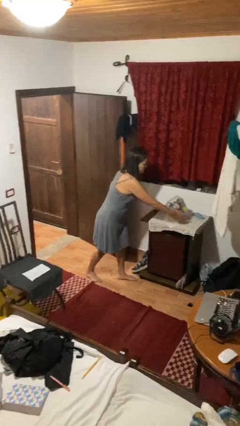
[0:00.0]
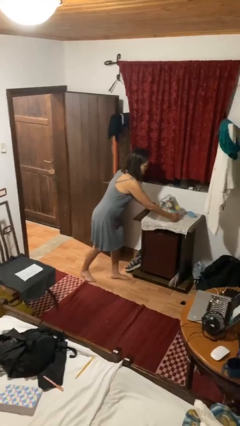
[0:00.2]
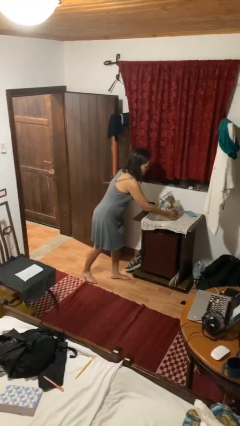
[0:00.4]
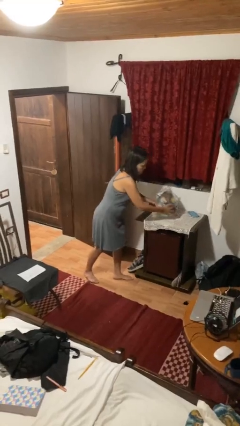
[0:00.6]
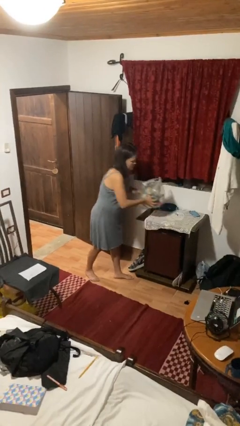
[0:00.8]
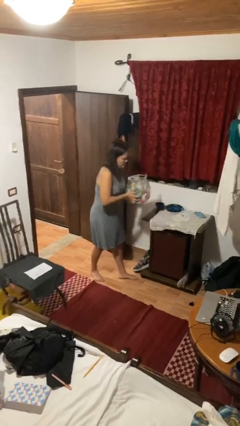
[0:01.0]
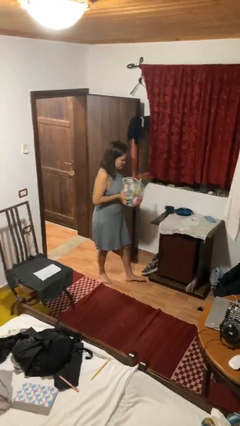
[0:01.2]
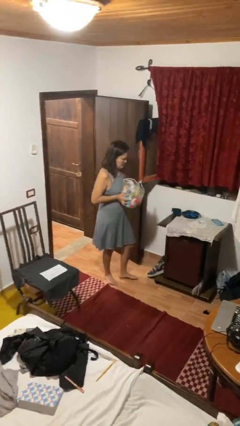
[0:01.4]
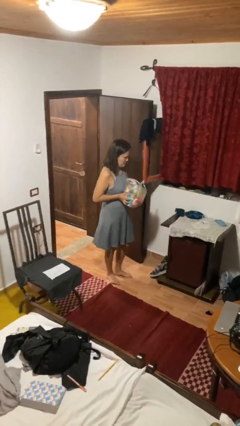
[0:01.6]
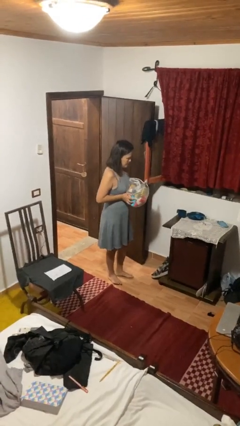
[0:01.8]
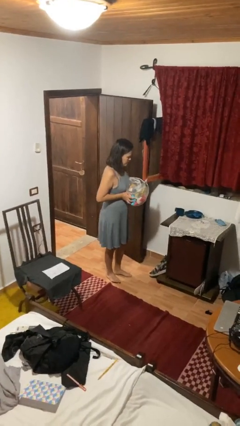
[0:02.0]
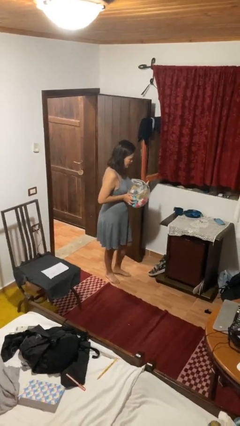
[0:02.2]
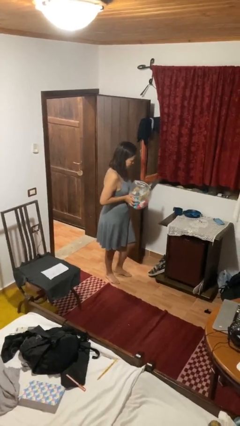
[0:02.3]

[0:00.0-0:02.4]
person picks up object from countertop

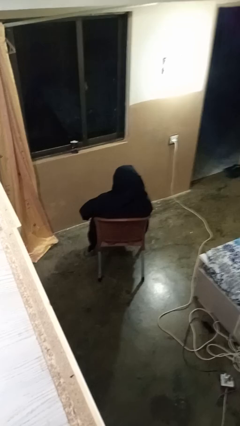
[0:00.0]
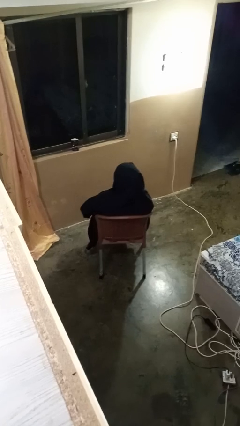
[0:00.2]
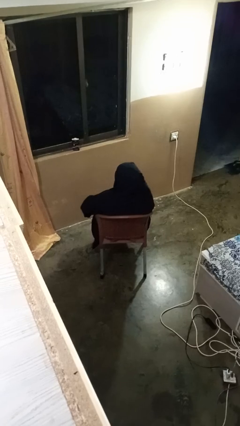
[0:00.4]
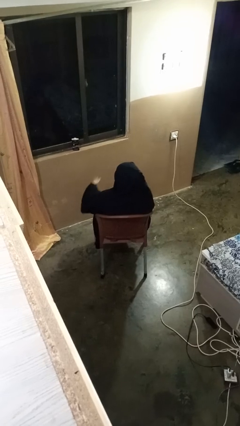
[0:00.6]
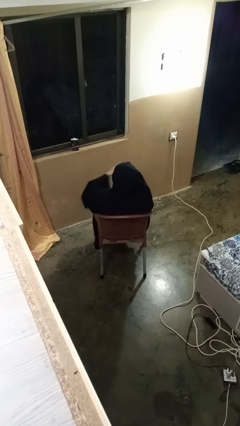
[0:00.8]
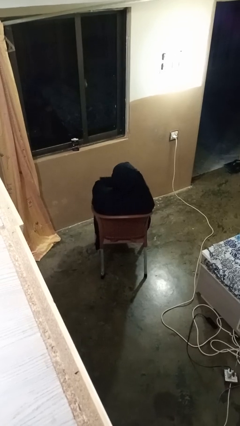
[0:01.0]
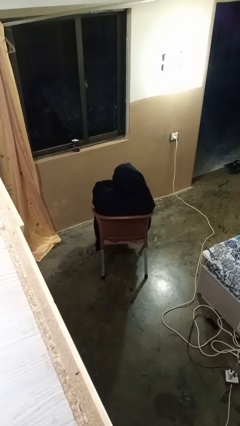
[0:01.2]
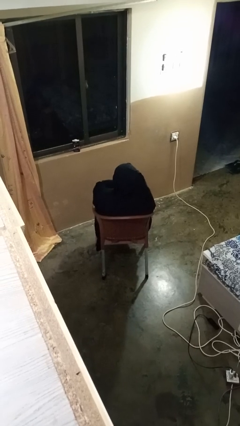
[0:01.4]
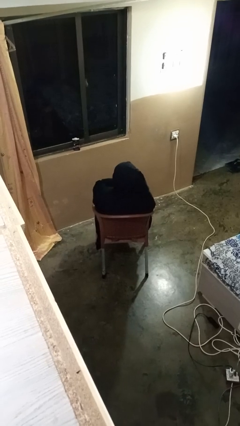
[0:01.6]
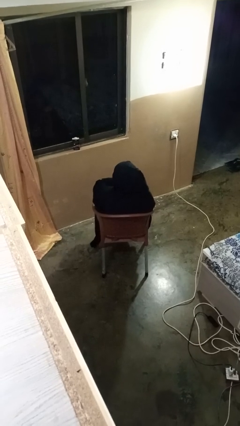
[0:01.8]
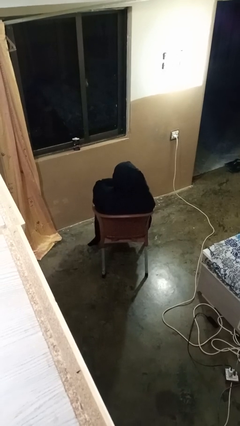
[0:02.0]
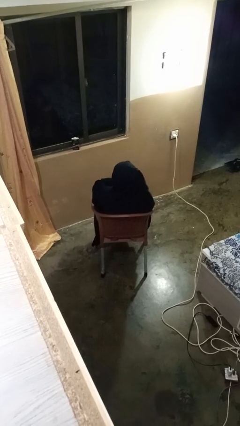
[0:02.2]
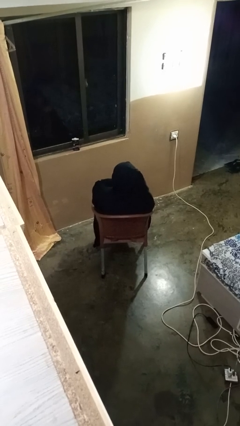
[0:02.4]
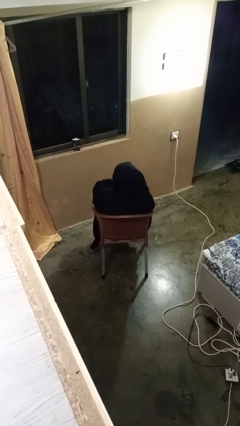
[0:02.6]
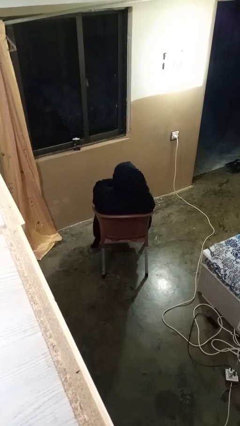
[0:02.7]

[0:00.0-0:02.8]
person gestures swipe up

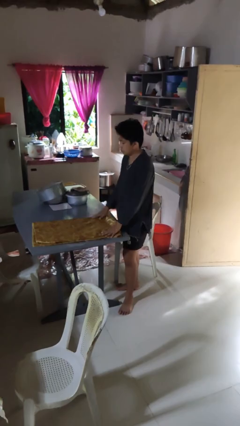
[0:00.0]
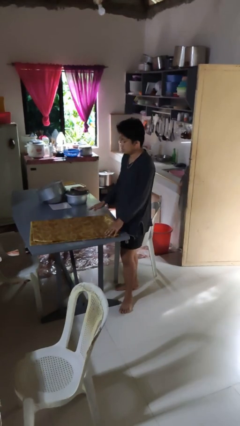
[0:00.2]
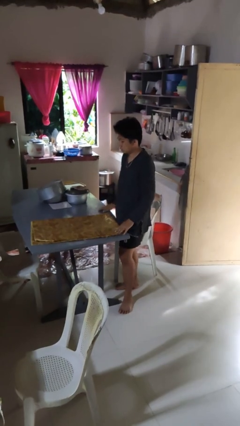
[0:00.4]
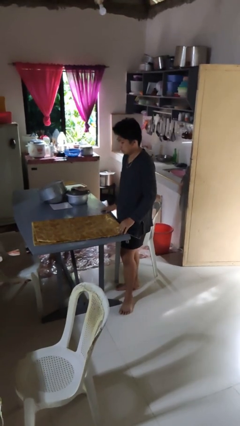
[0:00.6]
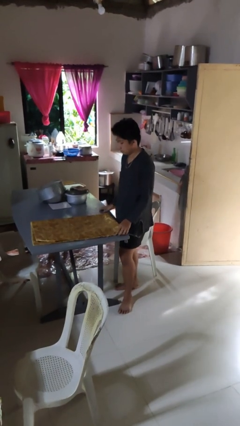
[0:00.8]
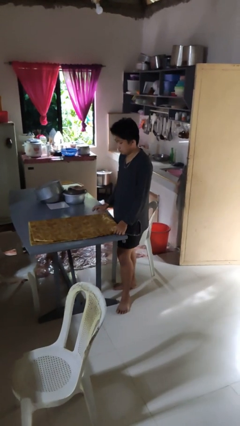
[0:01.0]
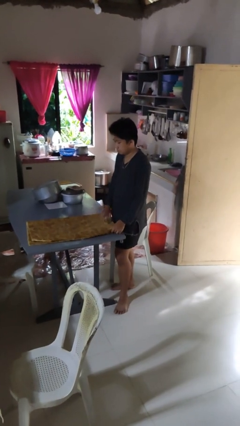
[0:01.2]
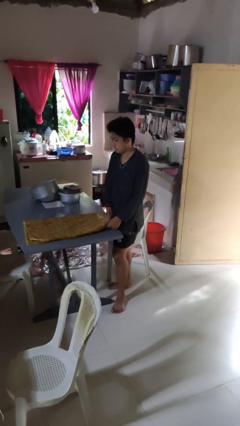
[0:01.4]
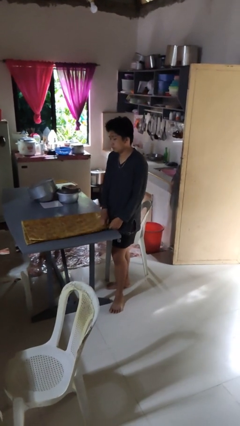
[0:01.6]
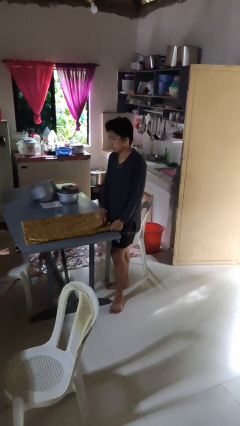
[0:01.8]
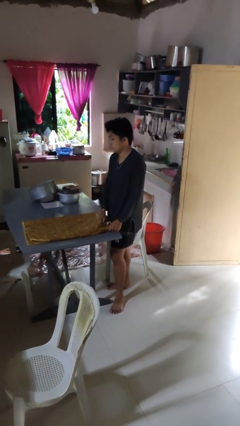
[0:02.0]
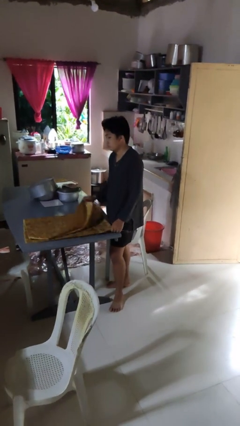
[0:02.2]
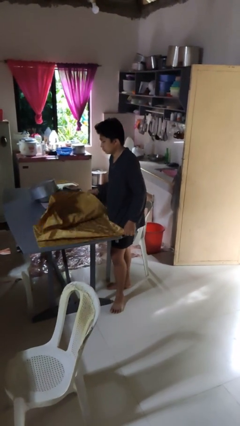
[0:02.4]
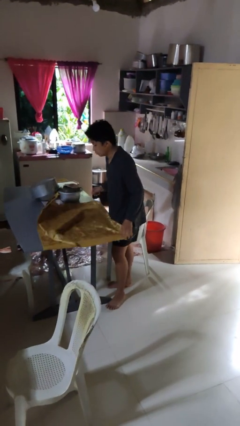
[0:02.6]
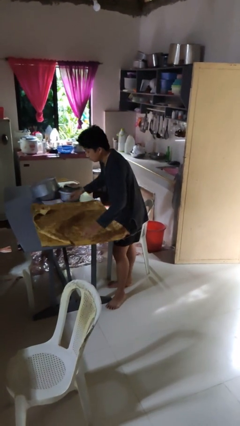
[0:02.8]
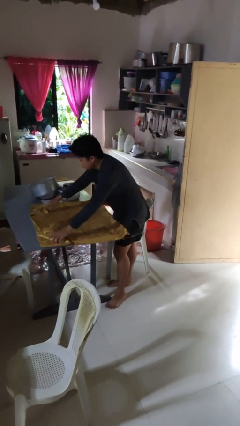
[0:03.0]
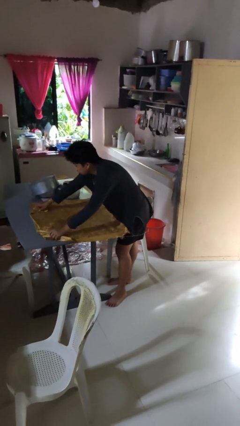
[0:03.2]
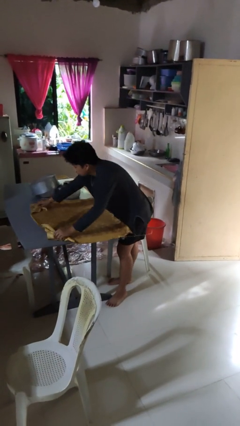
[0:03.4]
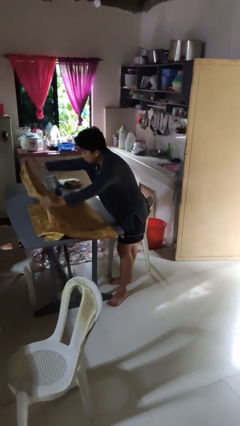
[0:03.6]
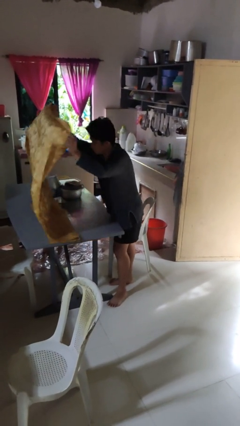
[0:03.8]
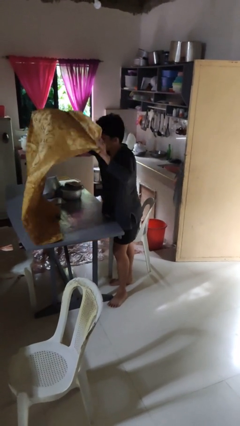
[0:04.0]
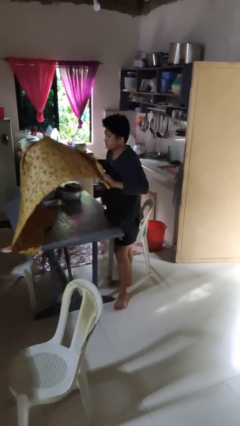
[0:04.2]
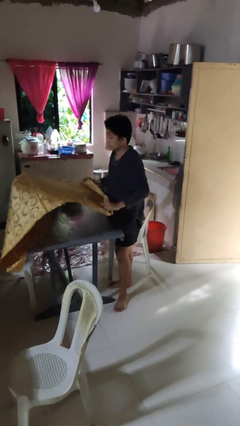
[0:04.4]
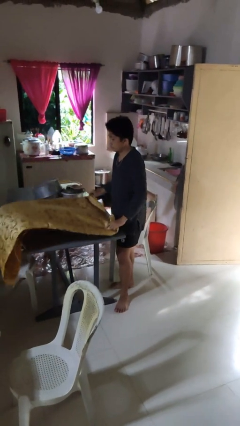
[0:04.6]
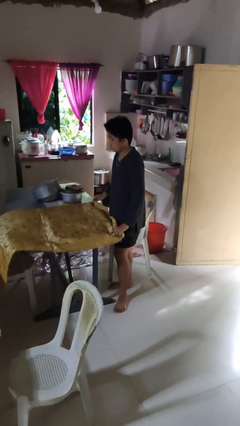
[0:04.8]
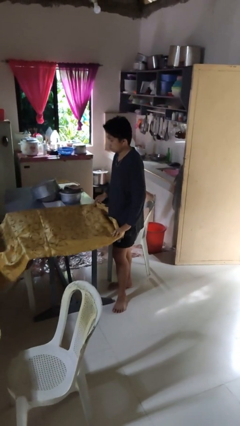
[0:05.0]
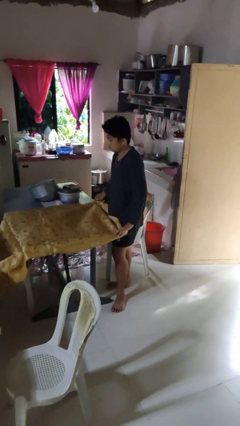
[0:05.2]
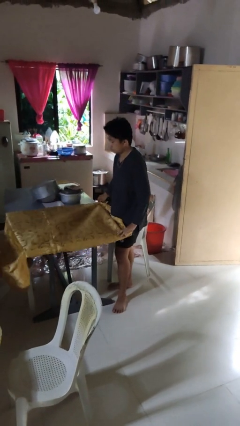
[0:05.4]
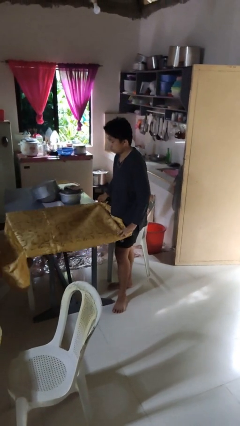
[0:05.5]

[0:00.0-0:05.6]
person spreads tablecloth

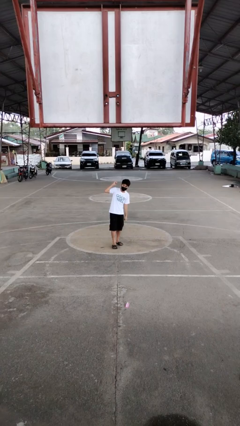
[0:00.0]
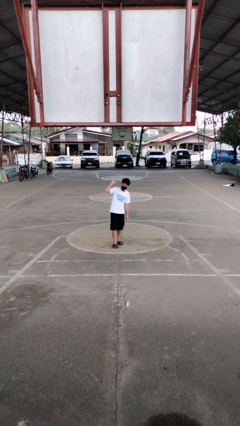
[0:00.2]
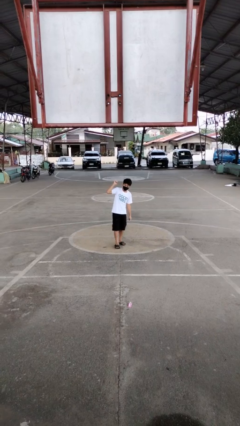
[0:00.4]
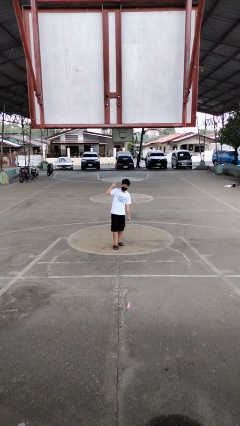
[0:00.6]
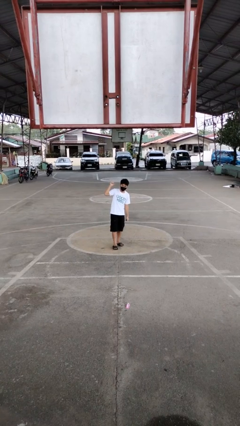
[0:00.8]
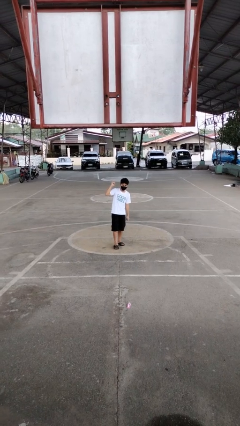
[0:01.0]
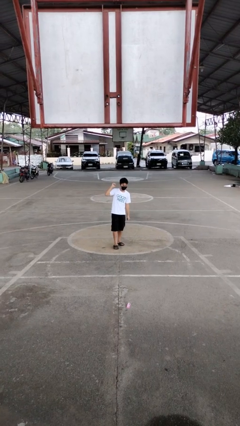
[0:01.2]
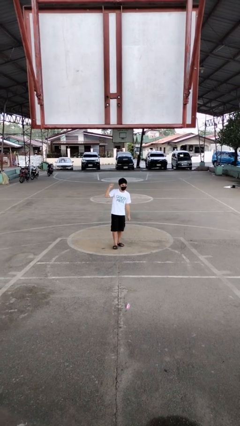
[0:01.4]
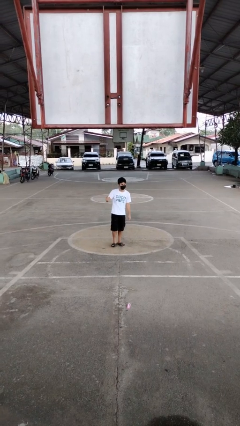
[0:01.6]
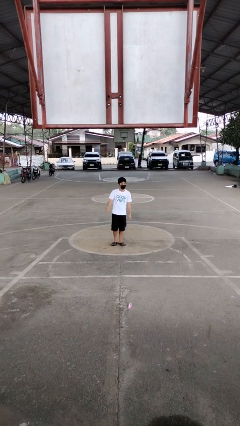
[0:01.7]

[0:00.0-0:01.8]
person gestures behind me

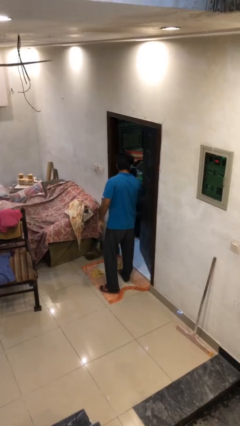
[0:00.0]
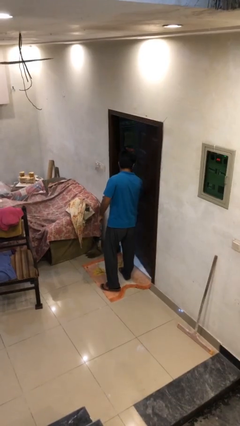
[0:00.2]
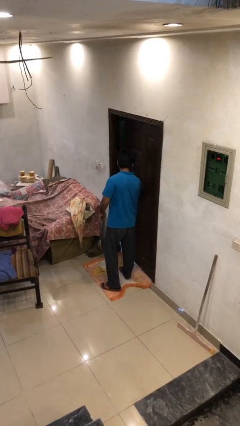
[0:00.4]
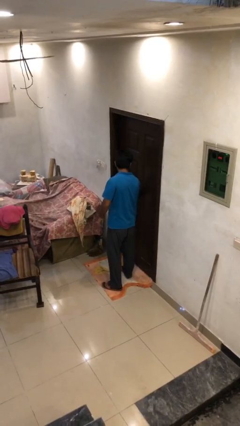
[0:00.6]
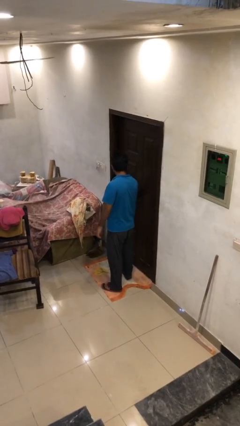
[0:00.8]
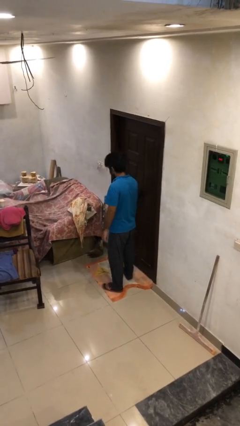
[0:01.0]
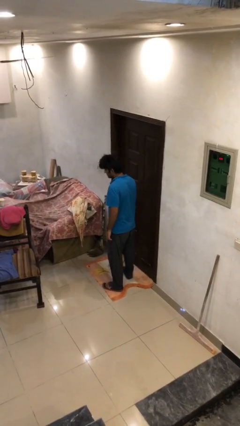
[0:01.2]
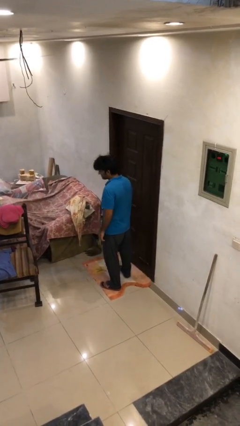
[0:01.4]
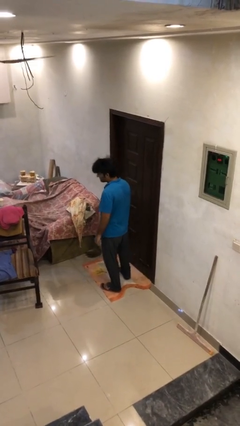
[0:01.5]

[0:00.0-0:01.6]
person closes facility door

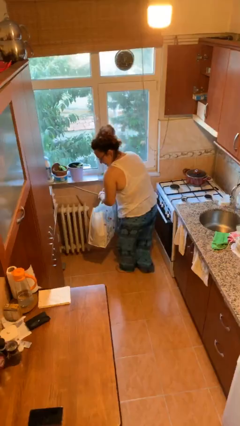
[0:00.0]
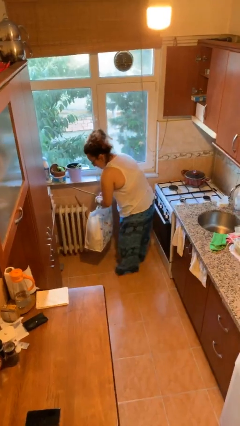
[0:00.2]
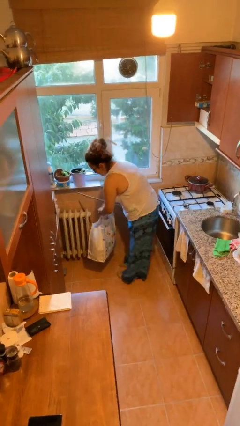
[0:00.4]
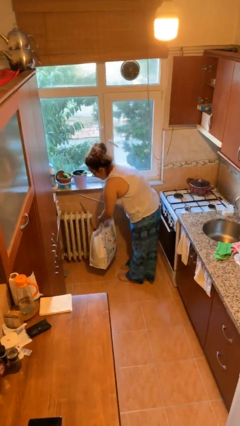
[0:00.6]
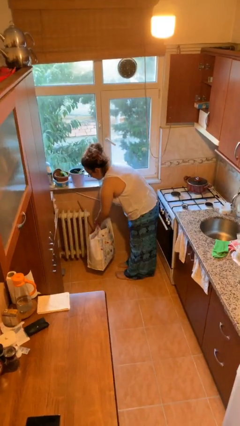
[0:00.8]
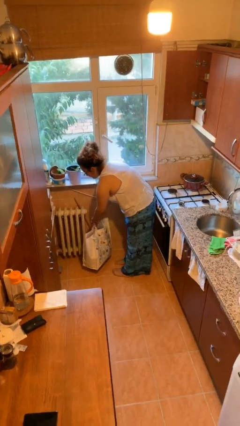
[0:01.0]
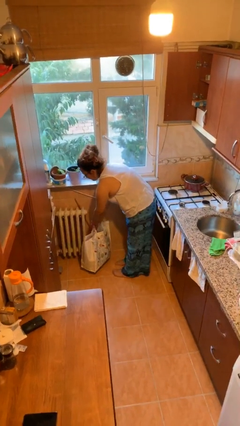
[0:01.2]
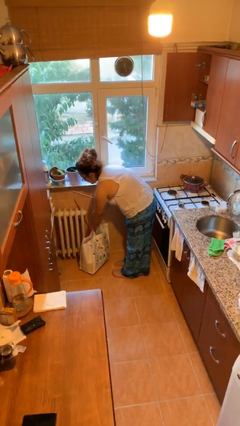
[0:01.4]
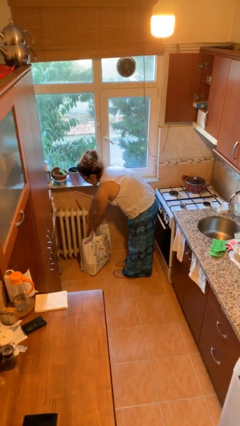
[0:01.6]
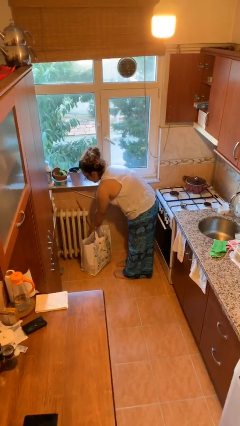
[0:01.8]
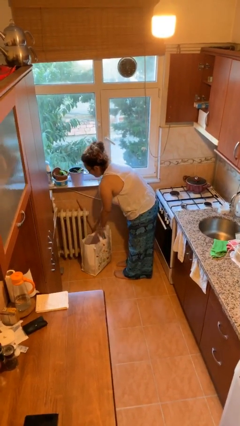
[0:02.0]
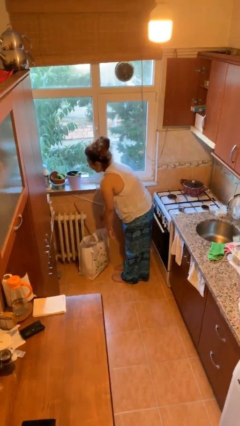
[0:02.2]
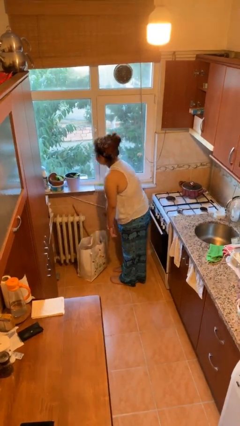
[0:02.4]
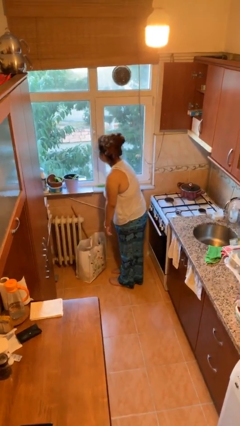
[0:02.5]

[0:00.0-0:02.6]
person puts down object on floor

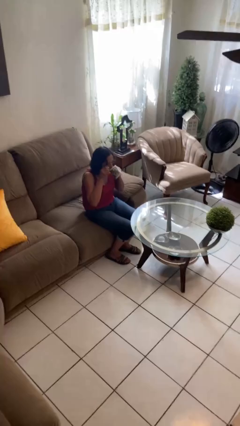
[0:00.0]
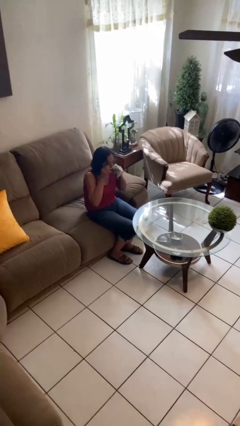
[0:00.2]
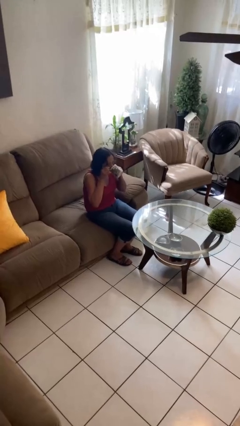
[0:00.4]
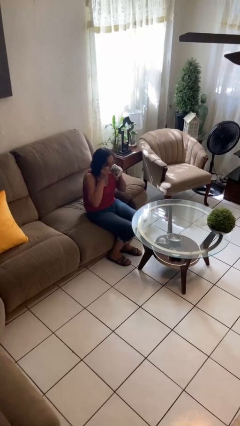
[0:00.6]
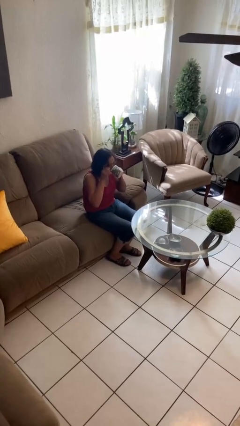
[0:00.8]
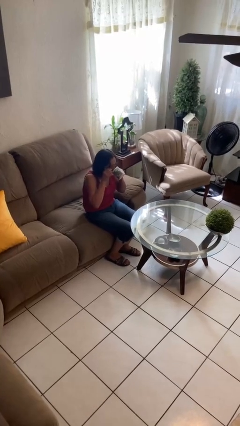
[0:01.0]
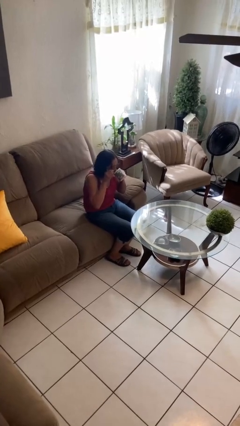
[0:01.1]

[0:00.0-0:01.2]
person drinks from mug
